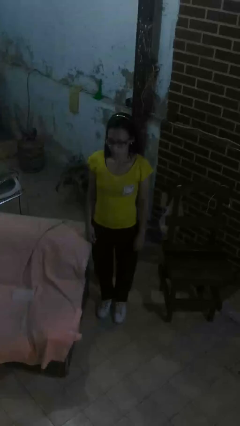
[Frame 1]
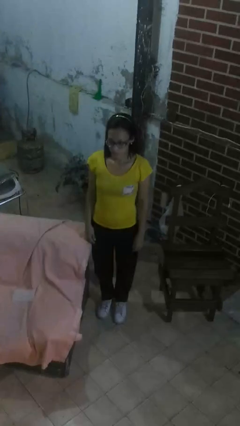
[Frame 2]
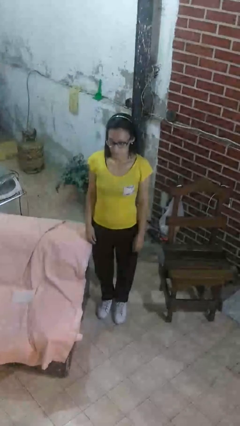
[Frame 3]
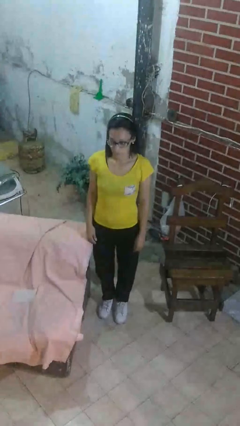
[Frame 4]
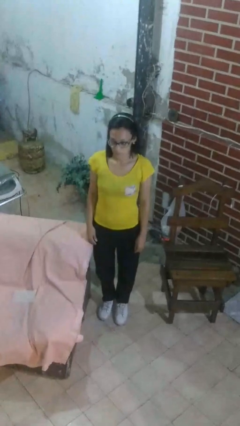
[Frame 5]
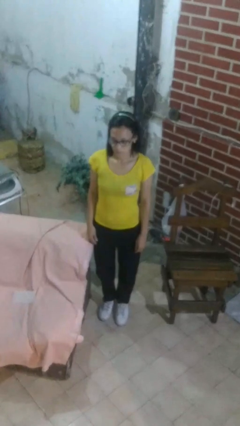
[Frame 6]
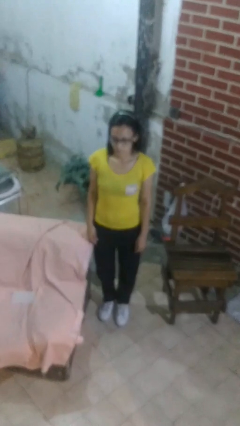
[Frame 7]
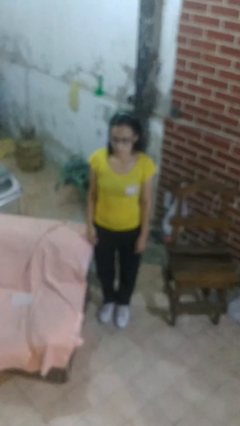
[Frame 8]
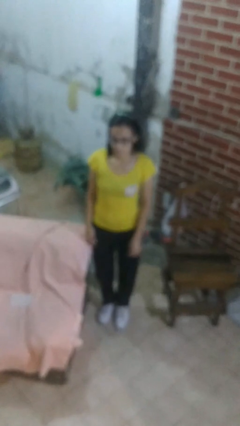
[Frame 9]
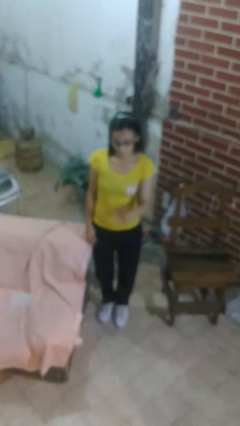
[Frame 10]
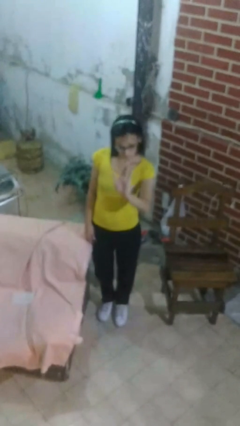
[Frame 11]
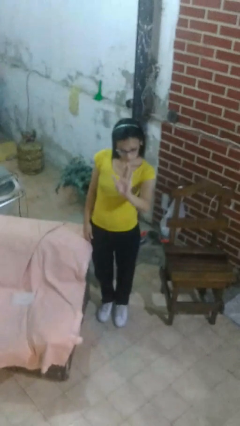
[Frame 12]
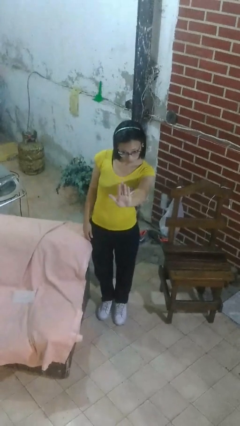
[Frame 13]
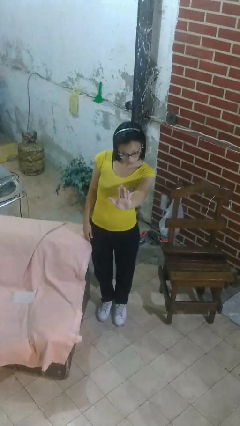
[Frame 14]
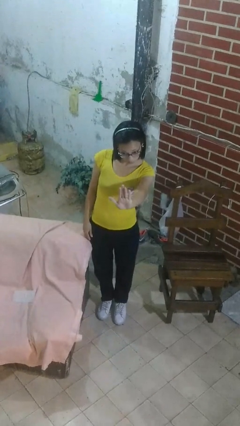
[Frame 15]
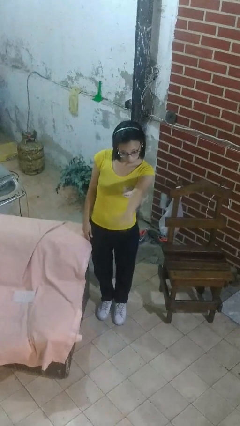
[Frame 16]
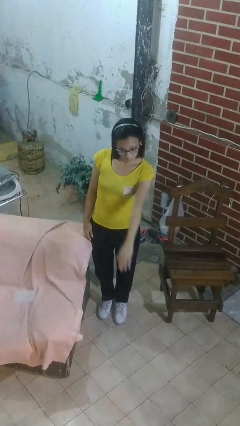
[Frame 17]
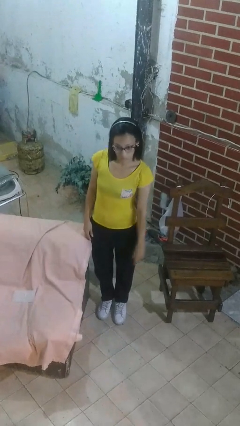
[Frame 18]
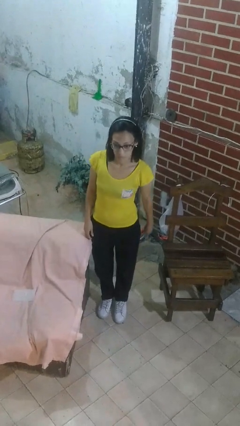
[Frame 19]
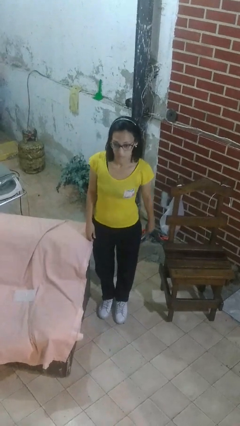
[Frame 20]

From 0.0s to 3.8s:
person gestures stop

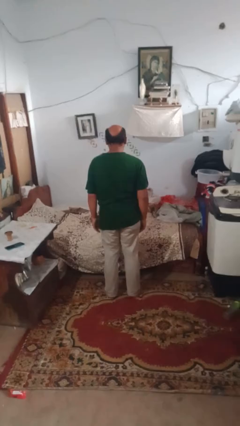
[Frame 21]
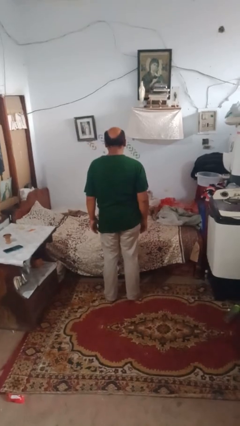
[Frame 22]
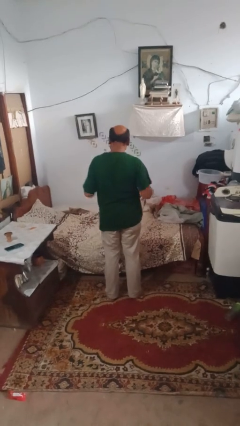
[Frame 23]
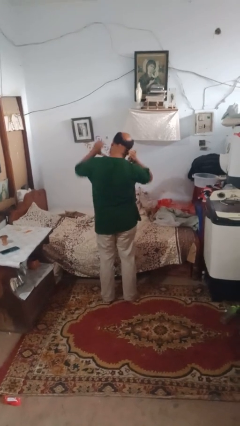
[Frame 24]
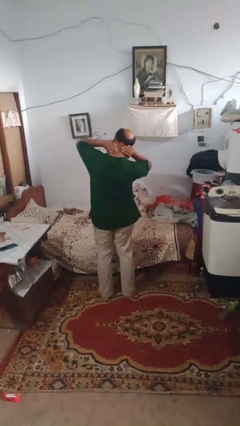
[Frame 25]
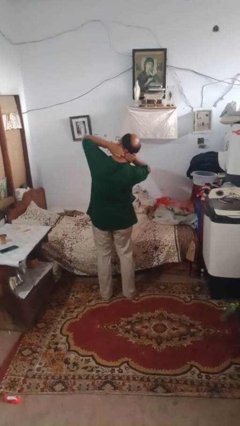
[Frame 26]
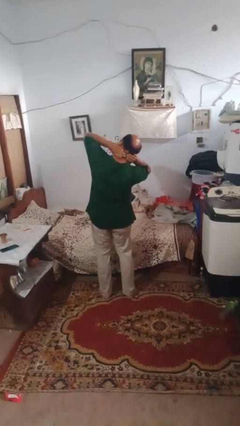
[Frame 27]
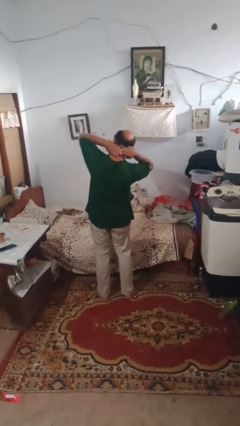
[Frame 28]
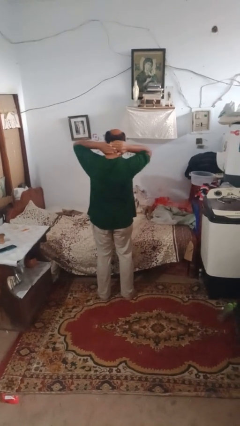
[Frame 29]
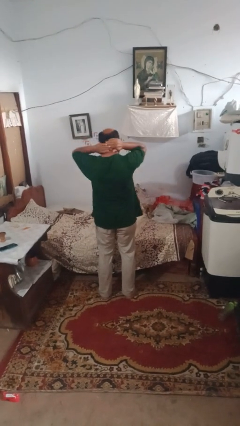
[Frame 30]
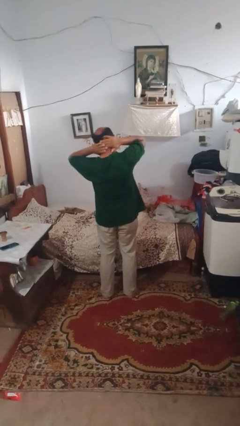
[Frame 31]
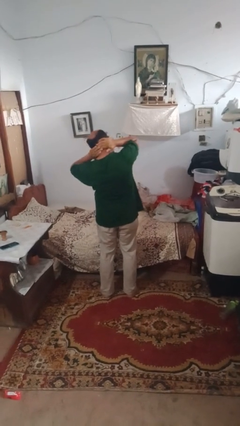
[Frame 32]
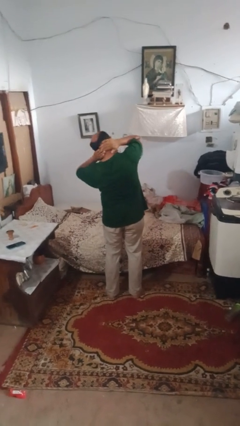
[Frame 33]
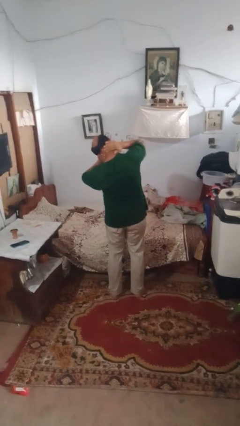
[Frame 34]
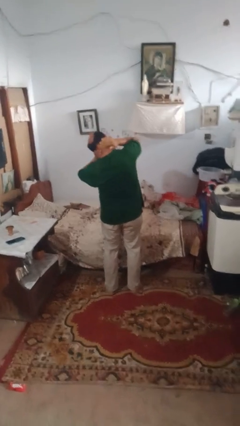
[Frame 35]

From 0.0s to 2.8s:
person rubs neck

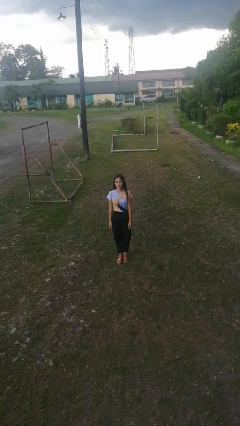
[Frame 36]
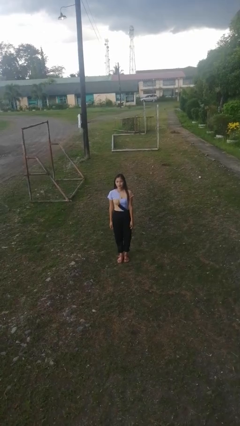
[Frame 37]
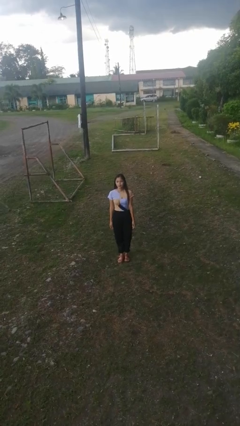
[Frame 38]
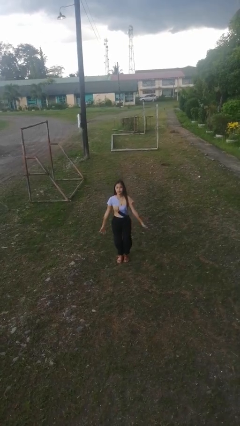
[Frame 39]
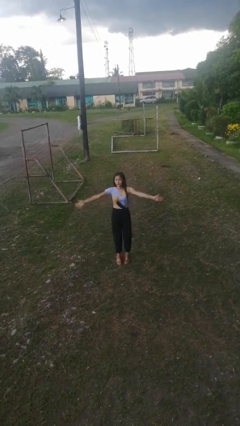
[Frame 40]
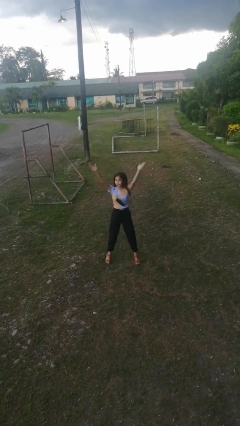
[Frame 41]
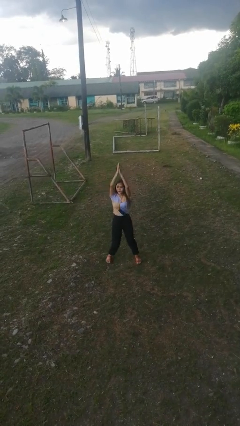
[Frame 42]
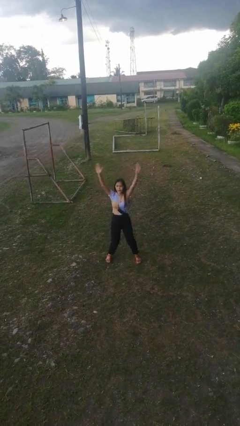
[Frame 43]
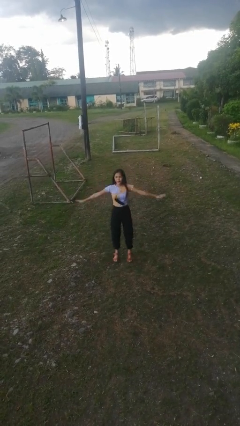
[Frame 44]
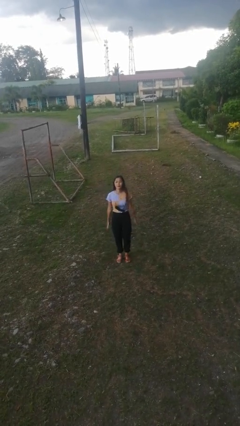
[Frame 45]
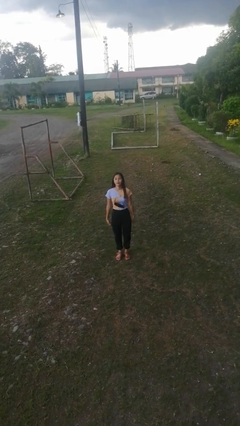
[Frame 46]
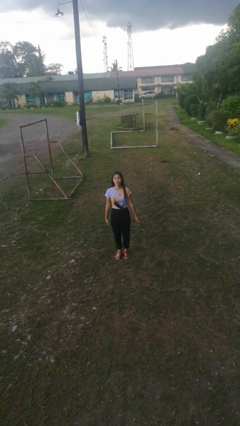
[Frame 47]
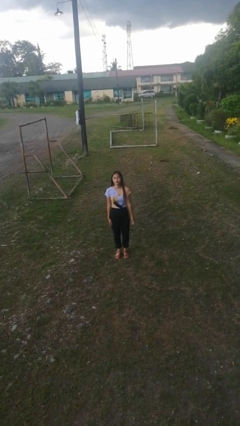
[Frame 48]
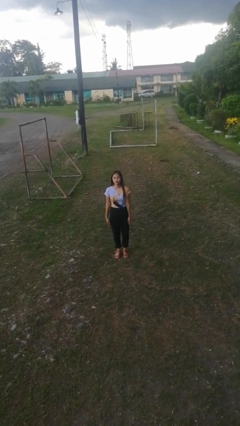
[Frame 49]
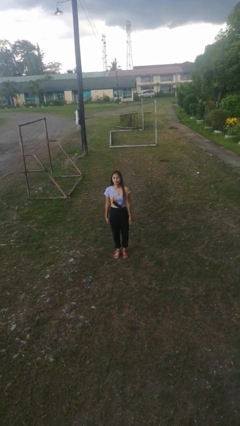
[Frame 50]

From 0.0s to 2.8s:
person exercises with jumping jacks

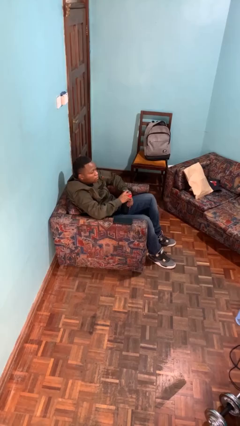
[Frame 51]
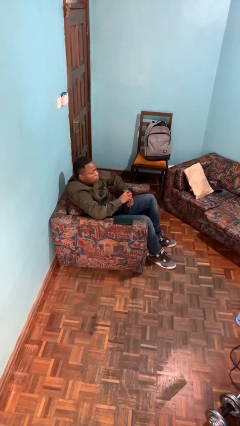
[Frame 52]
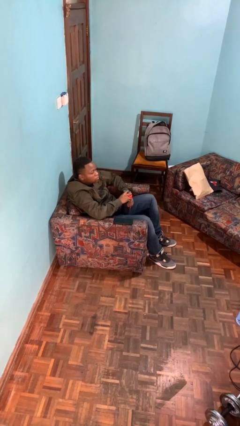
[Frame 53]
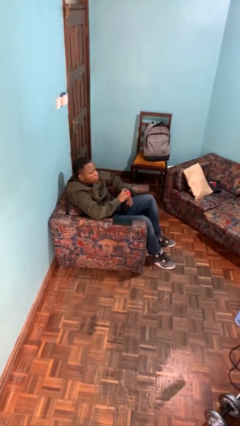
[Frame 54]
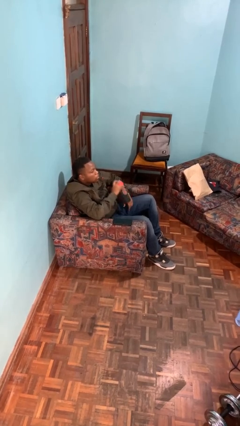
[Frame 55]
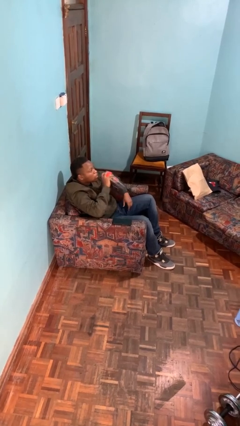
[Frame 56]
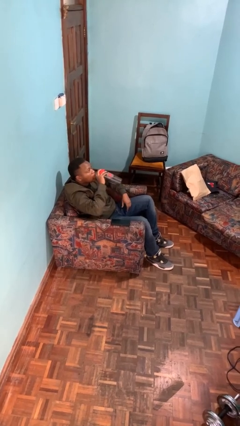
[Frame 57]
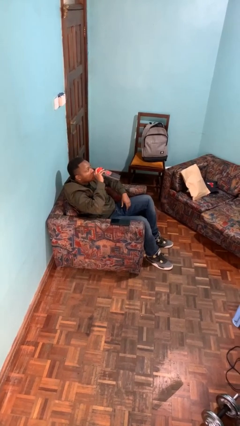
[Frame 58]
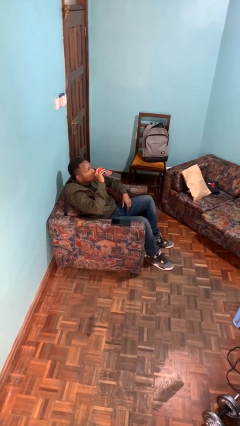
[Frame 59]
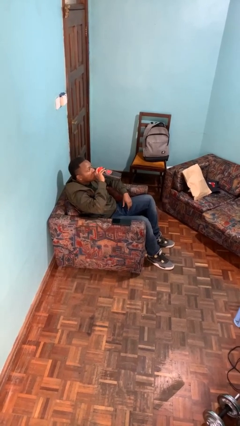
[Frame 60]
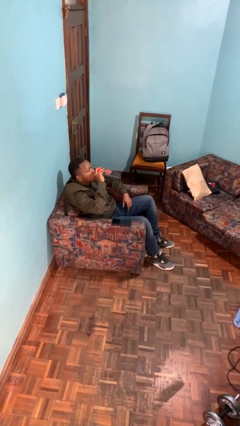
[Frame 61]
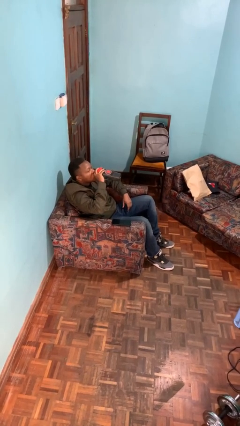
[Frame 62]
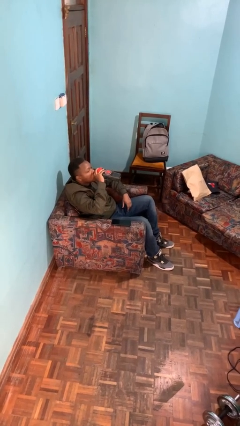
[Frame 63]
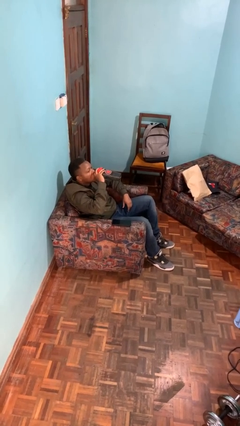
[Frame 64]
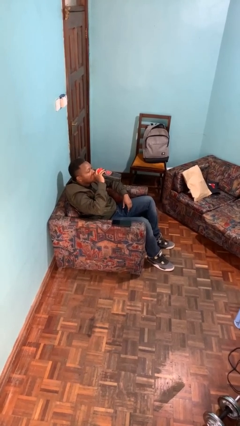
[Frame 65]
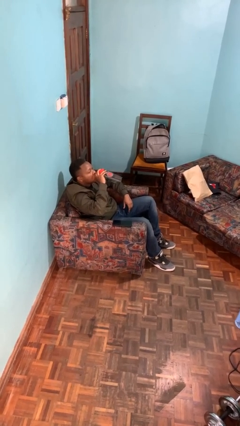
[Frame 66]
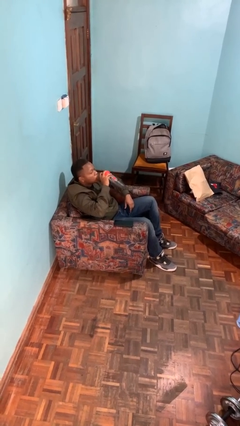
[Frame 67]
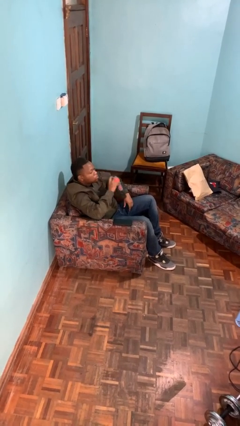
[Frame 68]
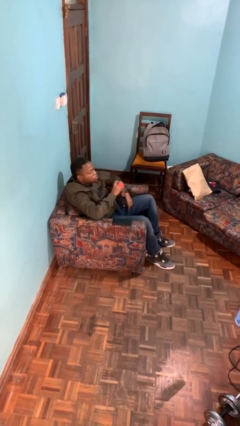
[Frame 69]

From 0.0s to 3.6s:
person drinks from bottle

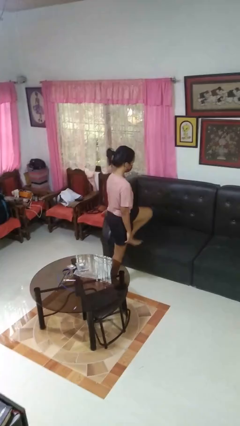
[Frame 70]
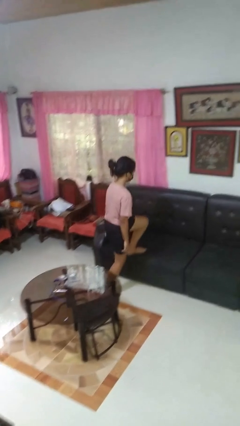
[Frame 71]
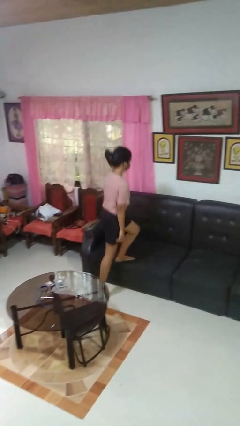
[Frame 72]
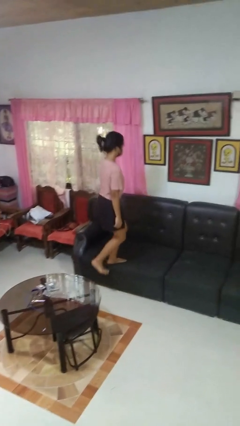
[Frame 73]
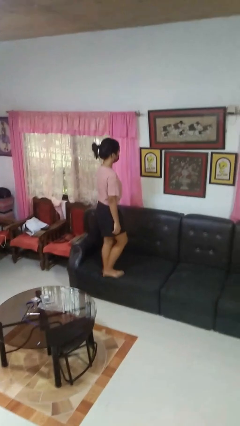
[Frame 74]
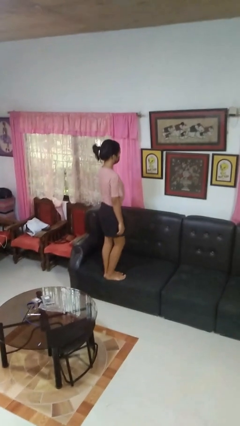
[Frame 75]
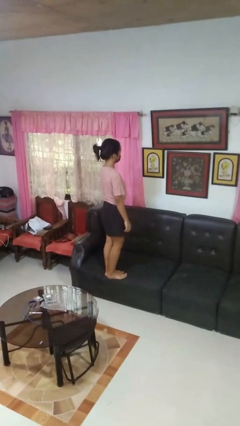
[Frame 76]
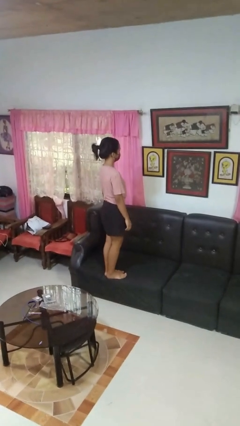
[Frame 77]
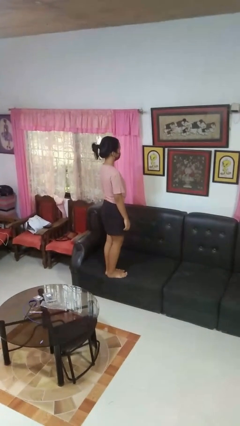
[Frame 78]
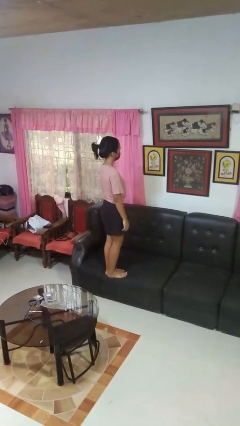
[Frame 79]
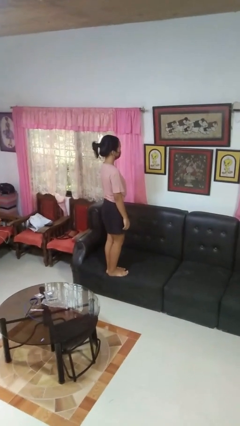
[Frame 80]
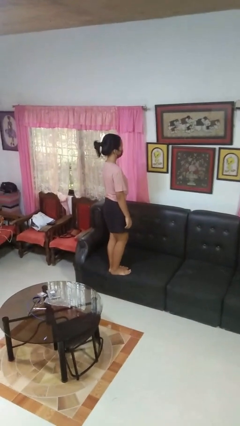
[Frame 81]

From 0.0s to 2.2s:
person climbs on couch

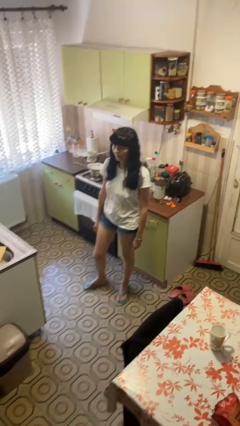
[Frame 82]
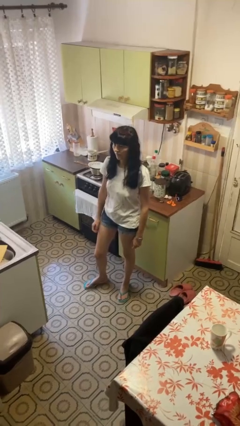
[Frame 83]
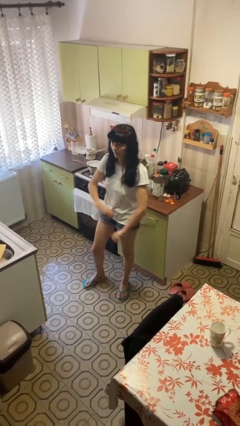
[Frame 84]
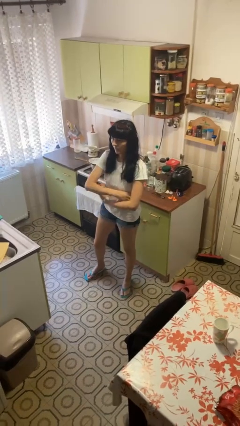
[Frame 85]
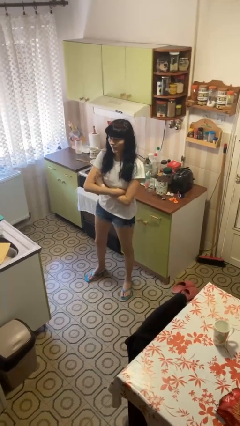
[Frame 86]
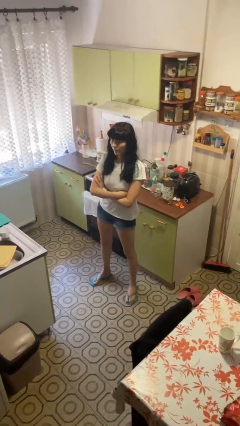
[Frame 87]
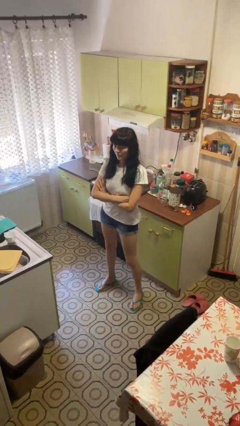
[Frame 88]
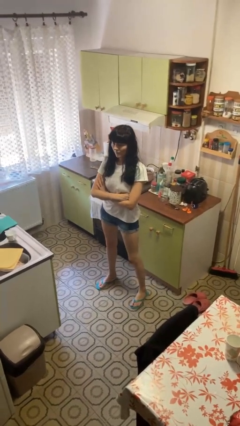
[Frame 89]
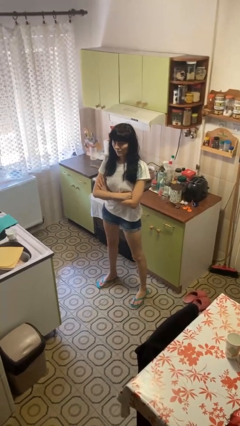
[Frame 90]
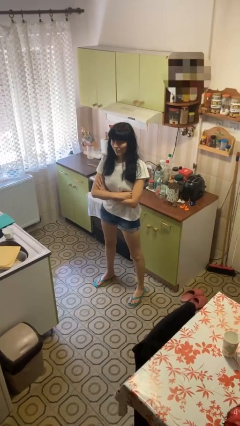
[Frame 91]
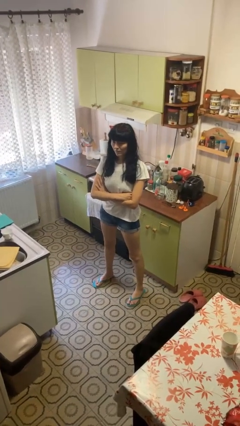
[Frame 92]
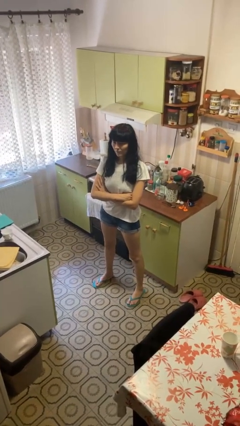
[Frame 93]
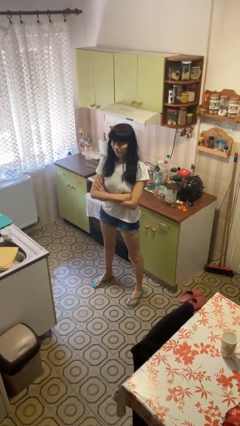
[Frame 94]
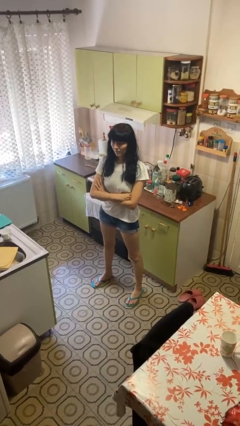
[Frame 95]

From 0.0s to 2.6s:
person crosses arms

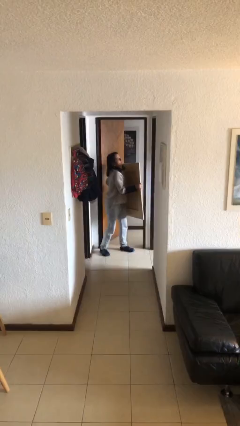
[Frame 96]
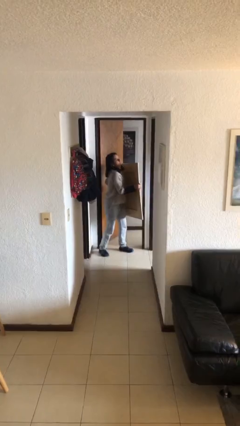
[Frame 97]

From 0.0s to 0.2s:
person carries heavy object
